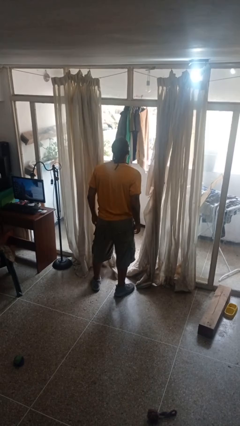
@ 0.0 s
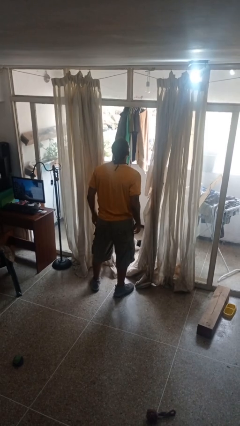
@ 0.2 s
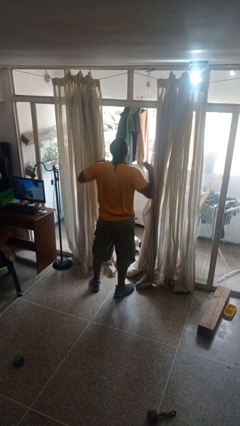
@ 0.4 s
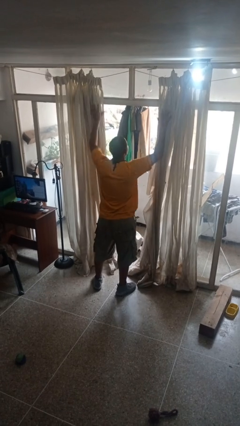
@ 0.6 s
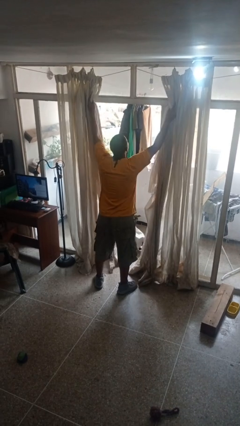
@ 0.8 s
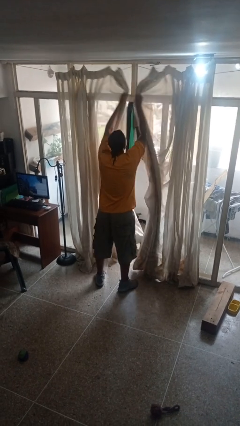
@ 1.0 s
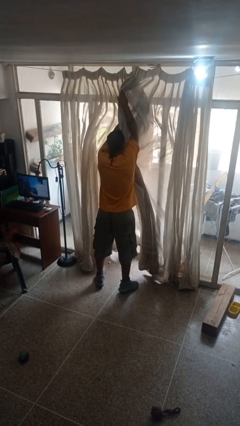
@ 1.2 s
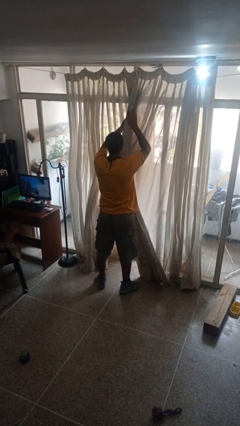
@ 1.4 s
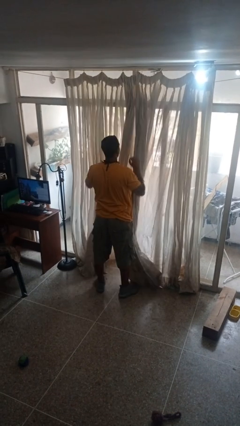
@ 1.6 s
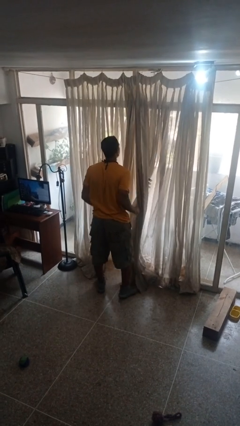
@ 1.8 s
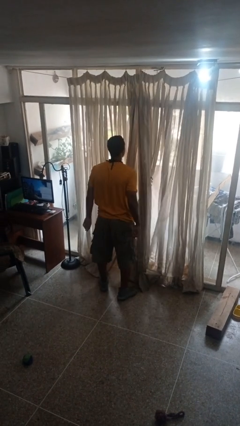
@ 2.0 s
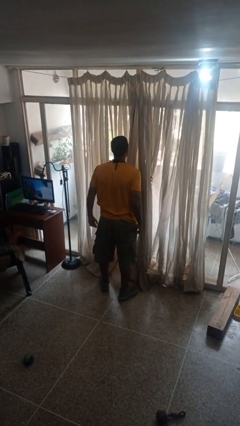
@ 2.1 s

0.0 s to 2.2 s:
person closes curtains

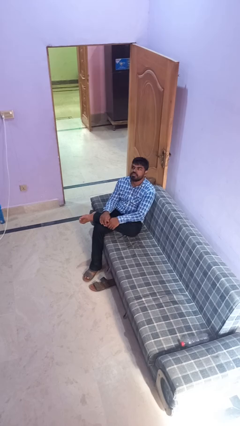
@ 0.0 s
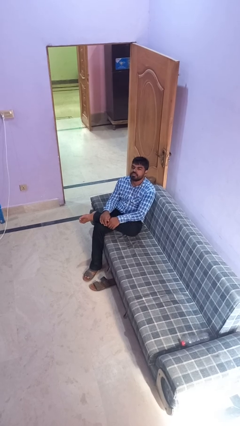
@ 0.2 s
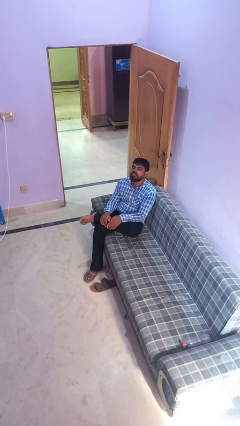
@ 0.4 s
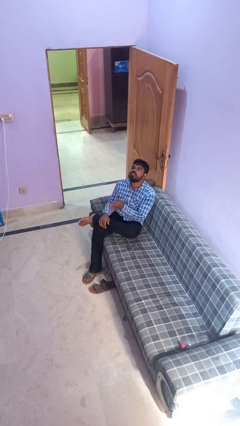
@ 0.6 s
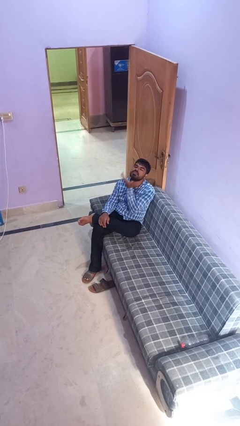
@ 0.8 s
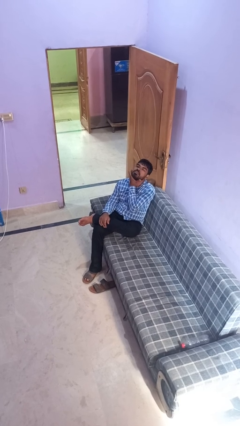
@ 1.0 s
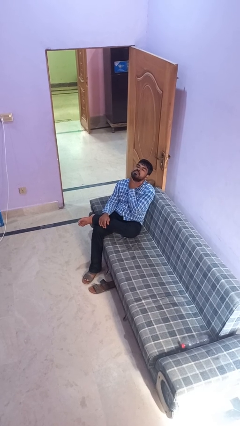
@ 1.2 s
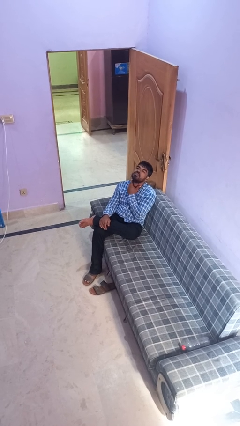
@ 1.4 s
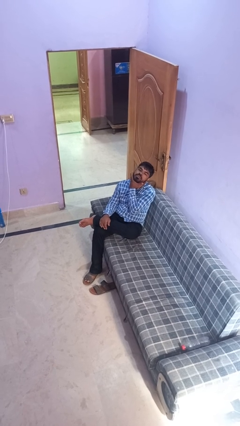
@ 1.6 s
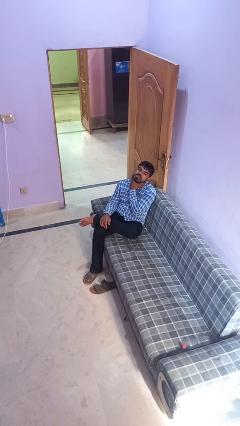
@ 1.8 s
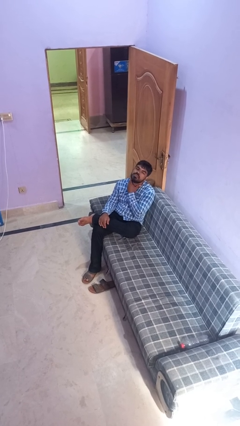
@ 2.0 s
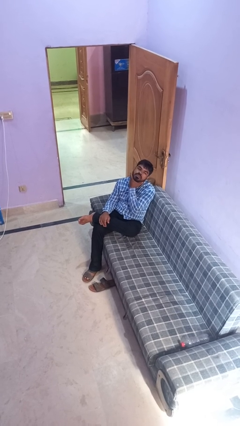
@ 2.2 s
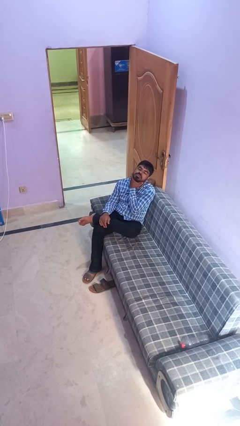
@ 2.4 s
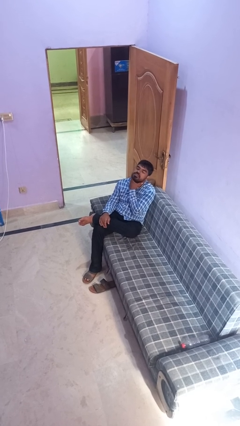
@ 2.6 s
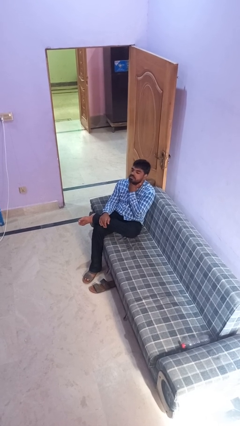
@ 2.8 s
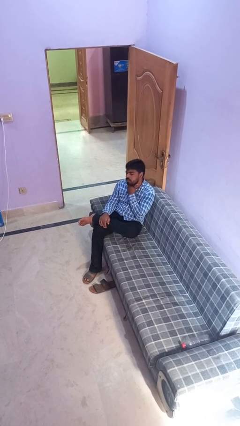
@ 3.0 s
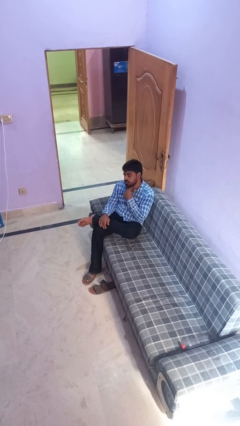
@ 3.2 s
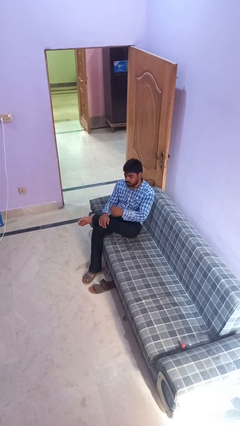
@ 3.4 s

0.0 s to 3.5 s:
person rubs neck

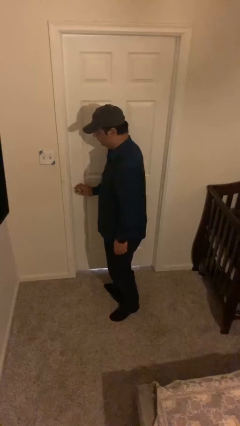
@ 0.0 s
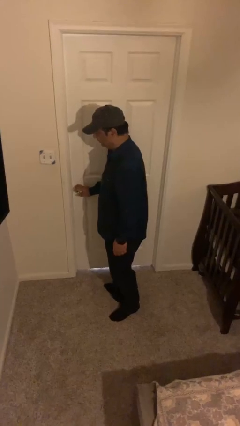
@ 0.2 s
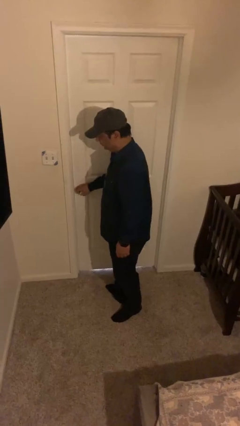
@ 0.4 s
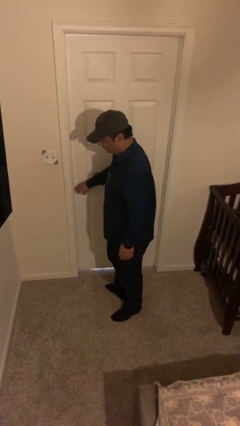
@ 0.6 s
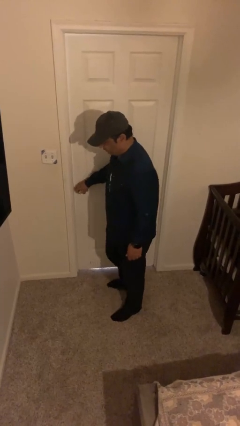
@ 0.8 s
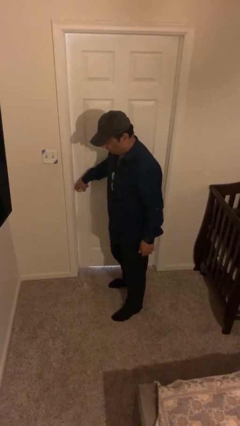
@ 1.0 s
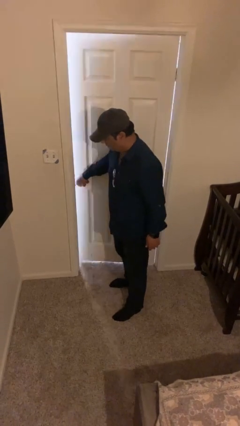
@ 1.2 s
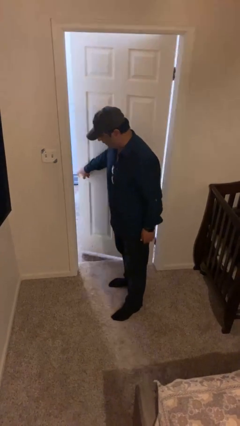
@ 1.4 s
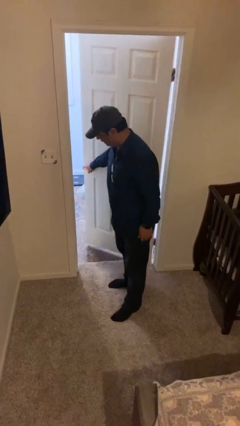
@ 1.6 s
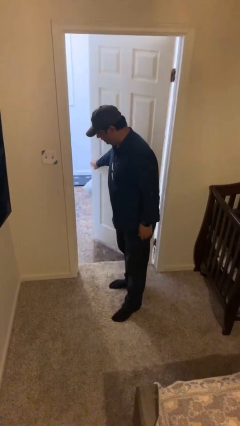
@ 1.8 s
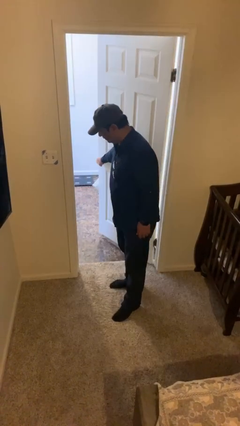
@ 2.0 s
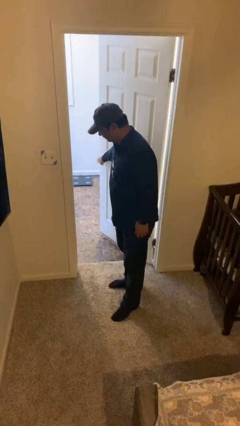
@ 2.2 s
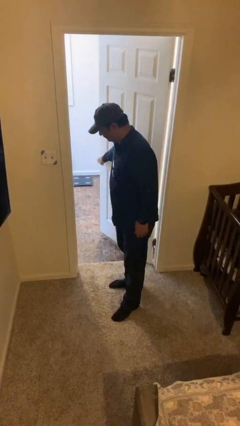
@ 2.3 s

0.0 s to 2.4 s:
person opens facility door

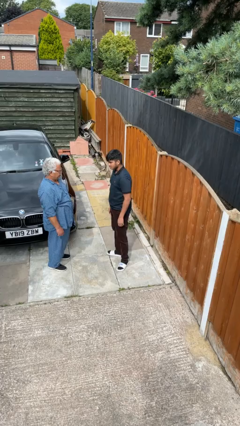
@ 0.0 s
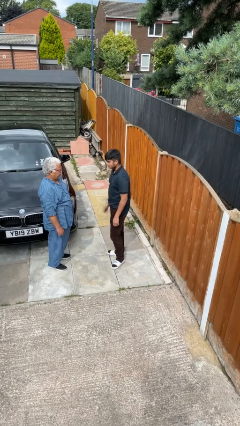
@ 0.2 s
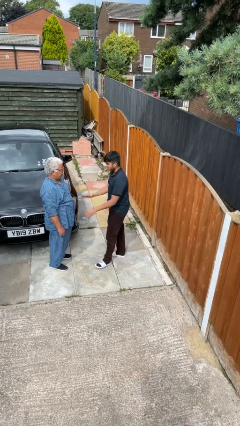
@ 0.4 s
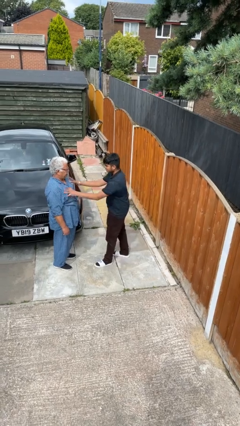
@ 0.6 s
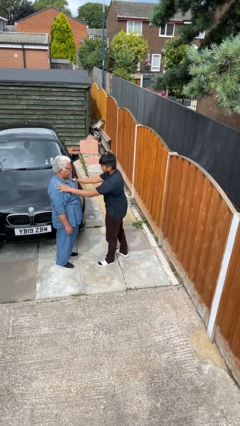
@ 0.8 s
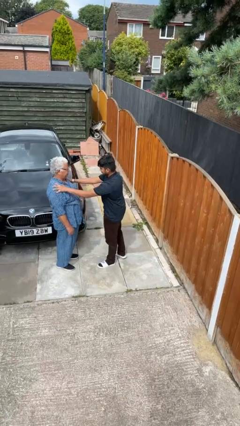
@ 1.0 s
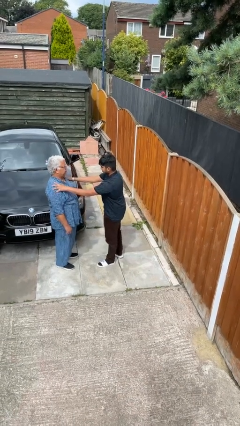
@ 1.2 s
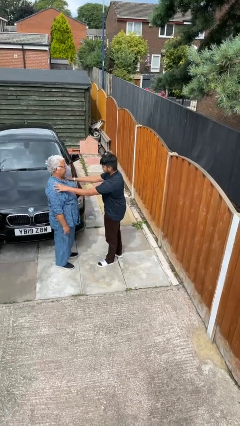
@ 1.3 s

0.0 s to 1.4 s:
person shoves person

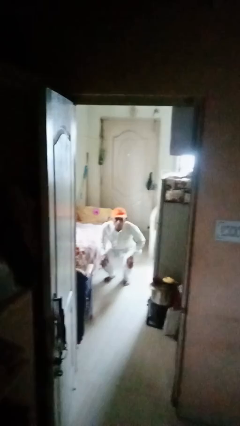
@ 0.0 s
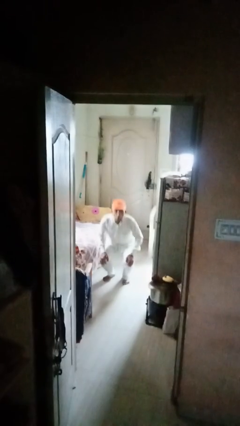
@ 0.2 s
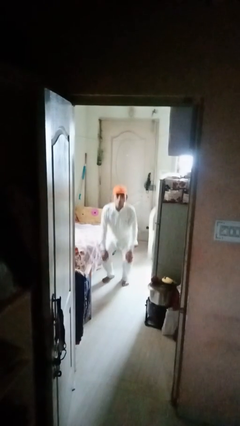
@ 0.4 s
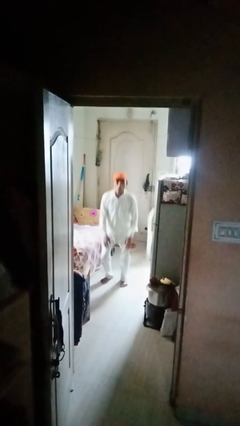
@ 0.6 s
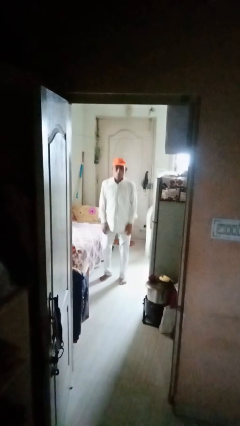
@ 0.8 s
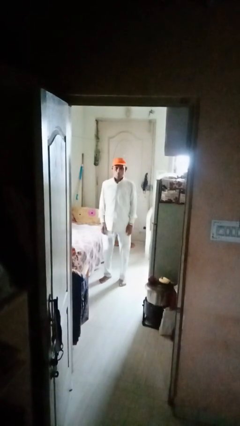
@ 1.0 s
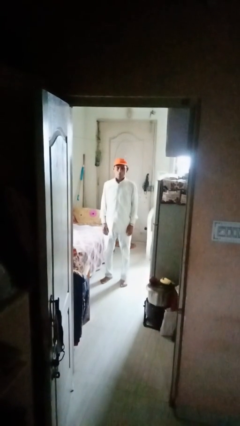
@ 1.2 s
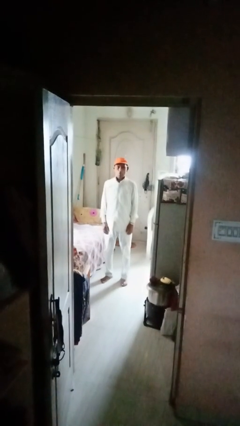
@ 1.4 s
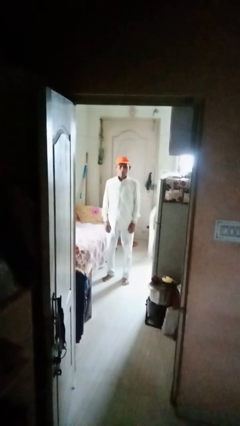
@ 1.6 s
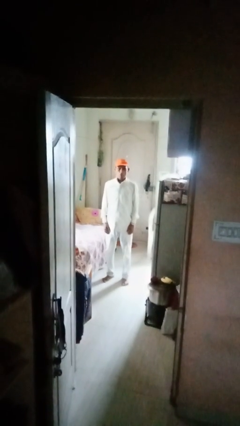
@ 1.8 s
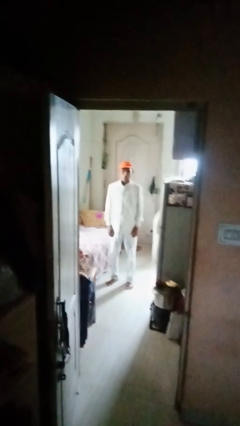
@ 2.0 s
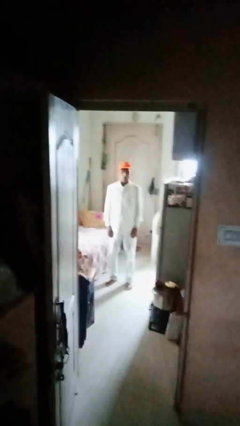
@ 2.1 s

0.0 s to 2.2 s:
person stands up

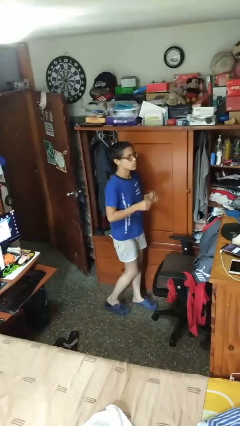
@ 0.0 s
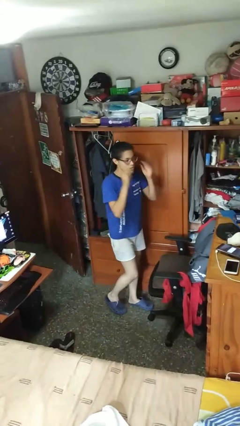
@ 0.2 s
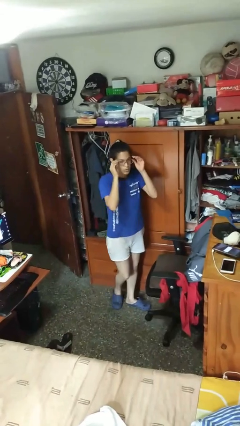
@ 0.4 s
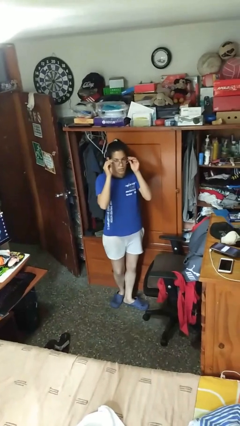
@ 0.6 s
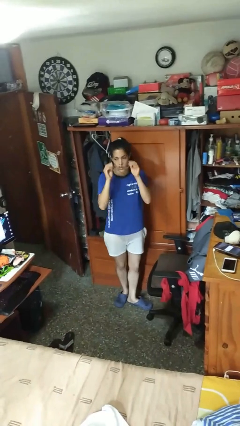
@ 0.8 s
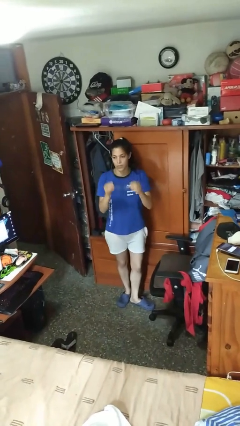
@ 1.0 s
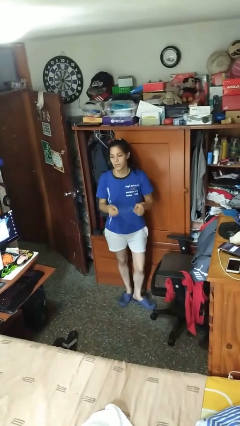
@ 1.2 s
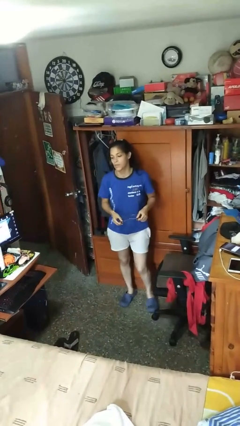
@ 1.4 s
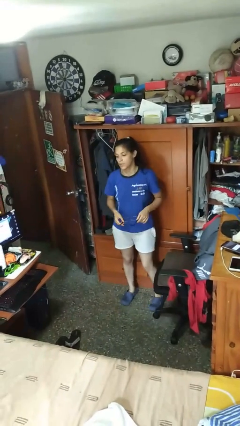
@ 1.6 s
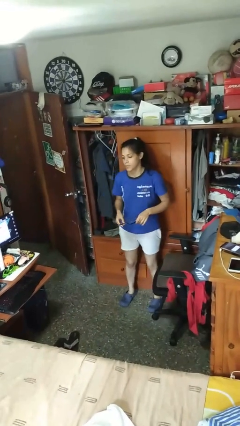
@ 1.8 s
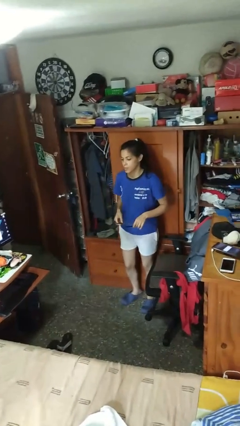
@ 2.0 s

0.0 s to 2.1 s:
person takes off glasses

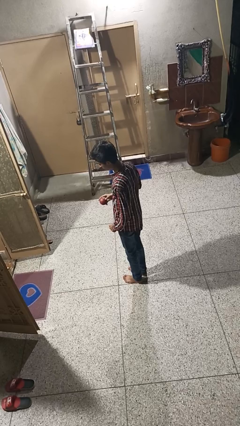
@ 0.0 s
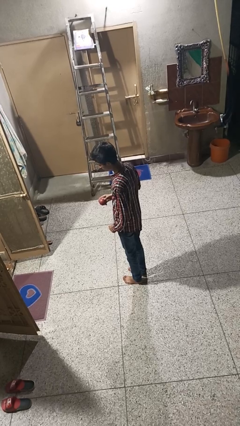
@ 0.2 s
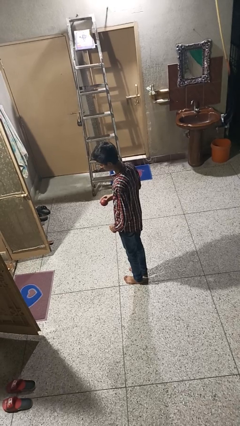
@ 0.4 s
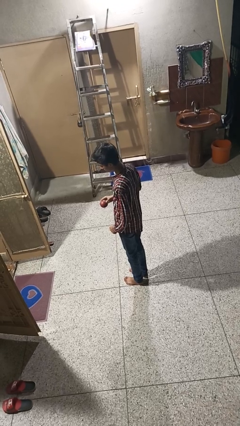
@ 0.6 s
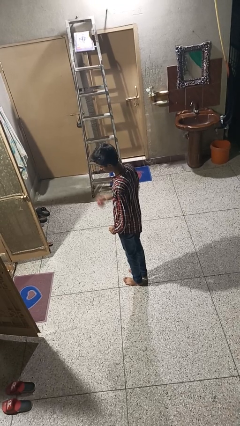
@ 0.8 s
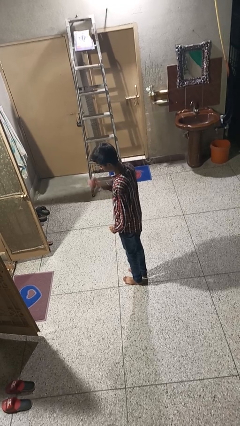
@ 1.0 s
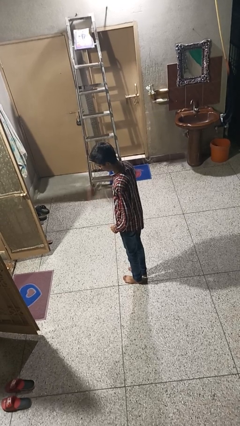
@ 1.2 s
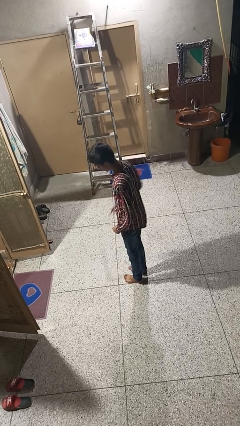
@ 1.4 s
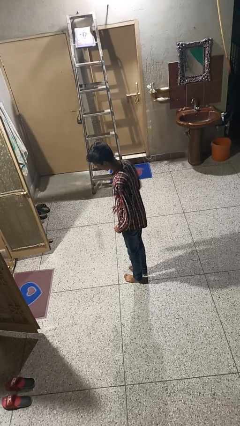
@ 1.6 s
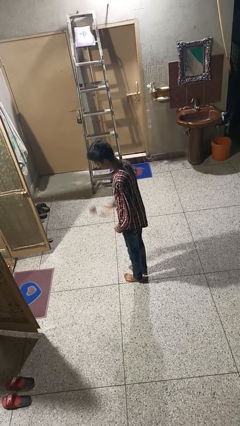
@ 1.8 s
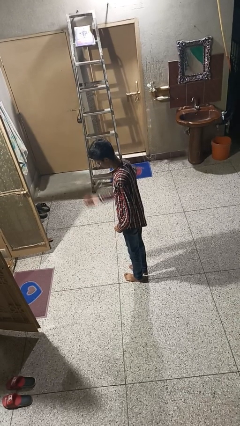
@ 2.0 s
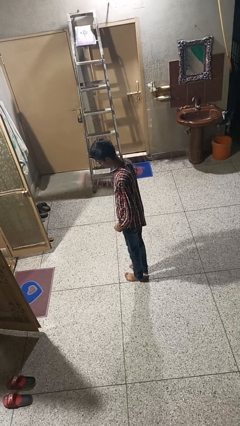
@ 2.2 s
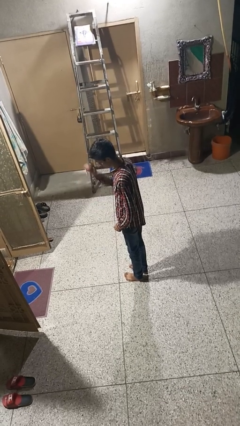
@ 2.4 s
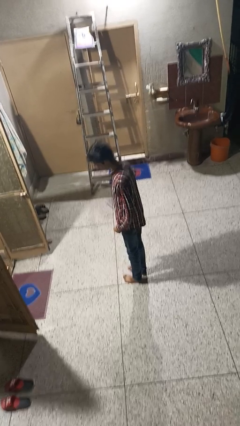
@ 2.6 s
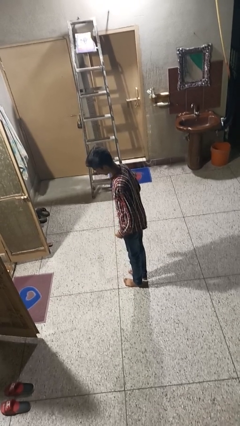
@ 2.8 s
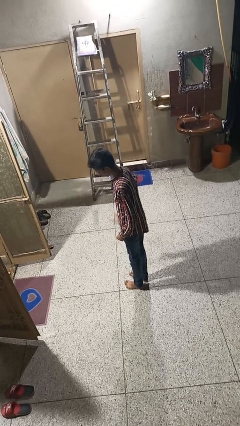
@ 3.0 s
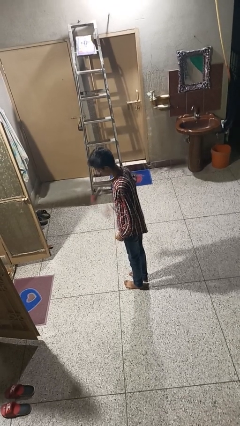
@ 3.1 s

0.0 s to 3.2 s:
person bounces ball on floor

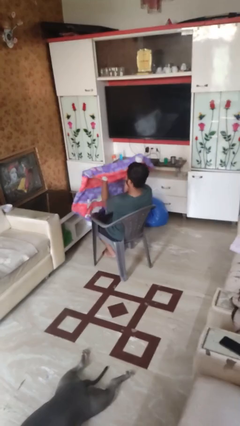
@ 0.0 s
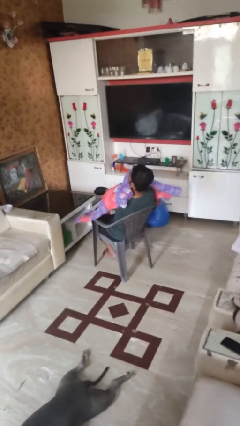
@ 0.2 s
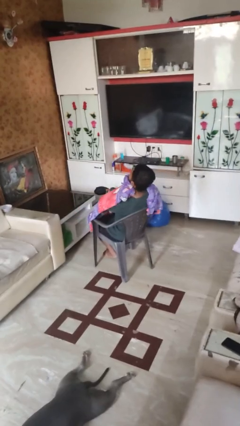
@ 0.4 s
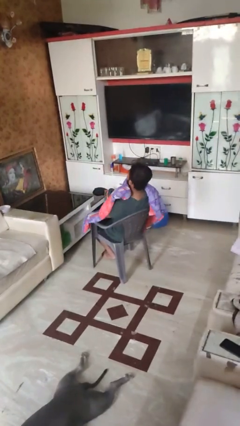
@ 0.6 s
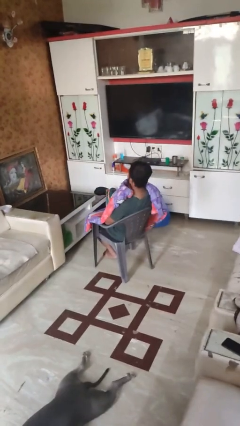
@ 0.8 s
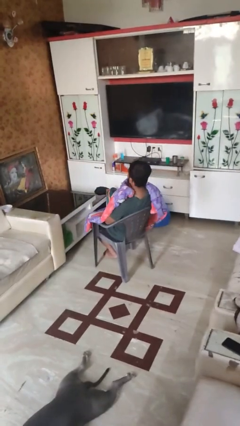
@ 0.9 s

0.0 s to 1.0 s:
person covers with blanket
